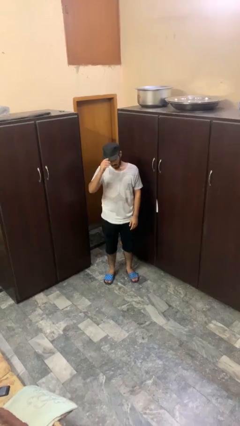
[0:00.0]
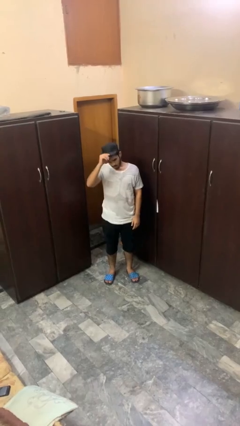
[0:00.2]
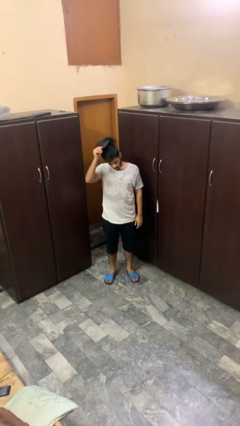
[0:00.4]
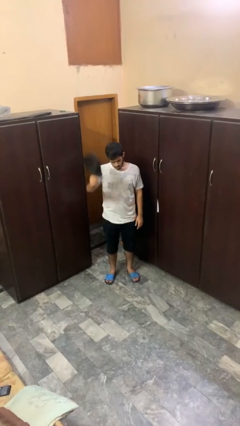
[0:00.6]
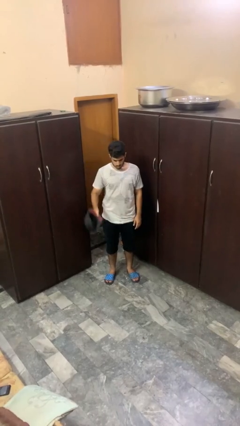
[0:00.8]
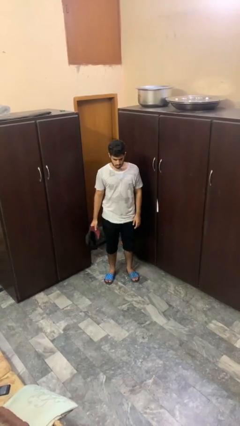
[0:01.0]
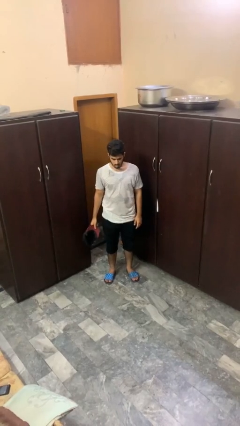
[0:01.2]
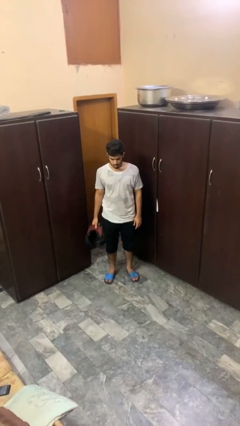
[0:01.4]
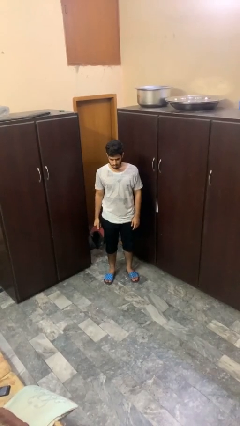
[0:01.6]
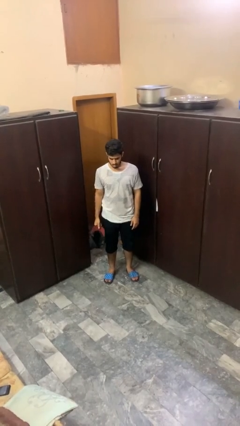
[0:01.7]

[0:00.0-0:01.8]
person takes off hat

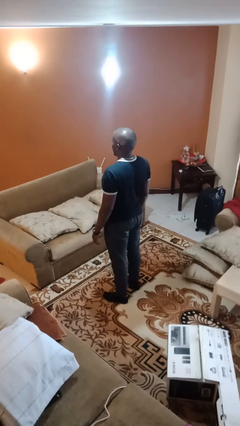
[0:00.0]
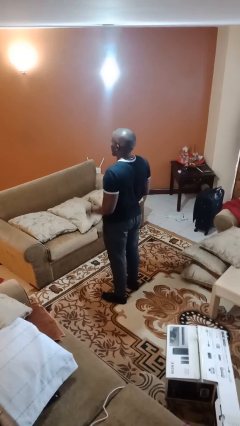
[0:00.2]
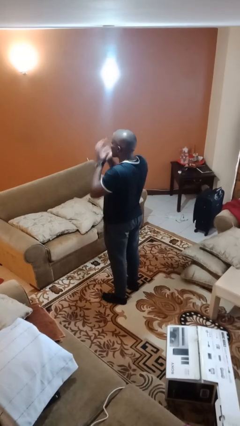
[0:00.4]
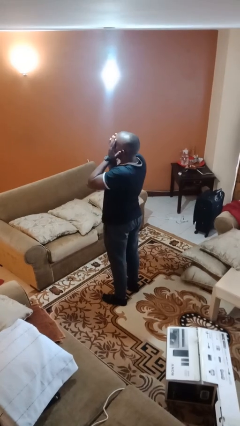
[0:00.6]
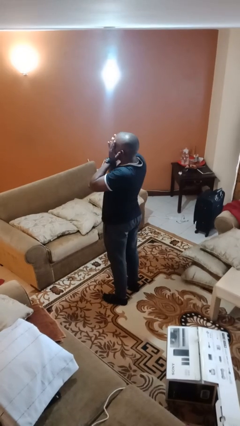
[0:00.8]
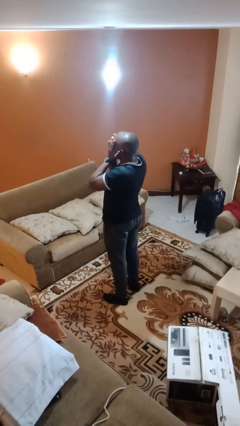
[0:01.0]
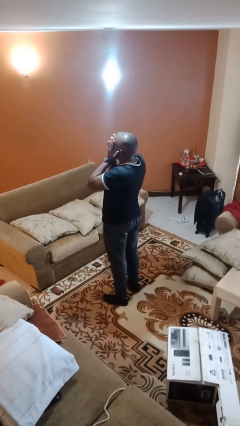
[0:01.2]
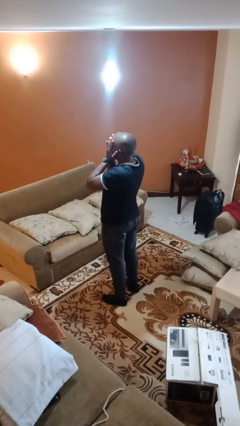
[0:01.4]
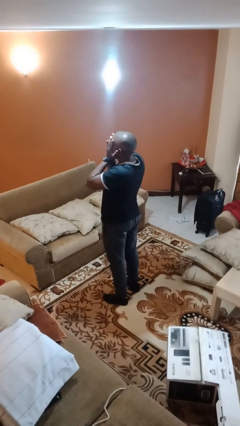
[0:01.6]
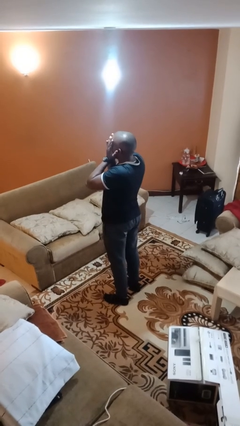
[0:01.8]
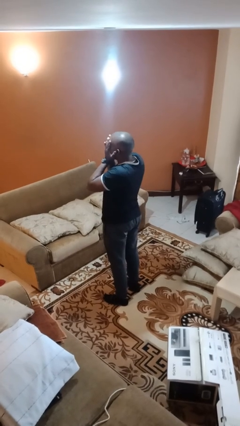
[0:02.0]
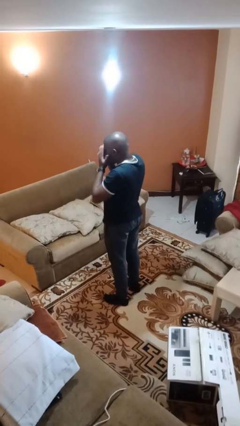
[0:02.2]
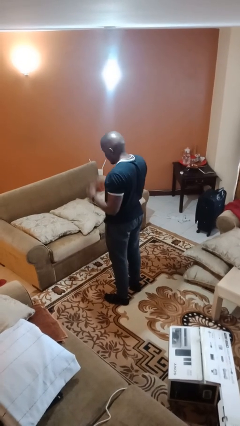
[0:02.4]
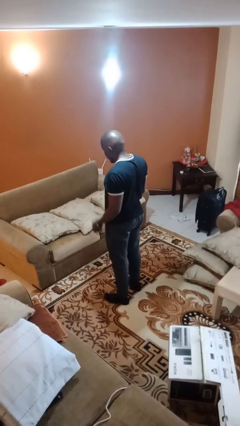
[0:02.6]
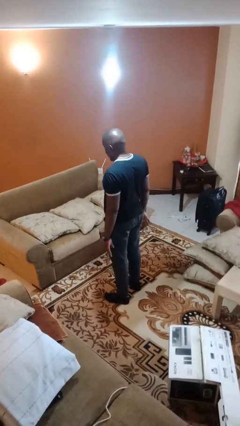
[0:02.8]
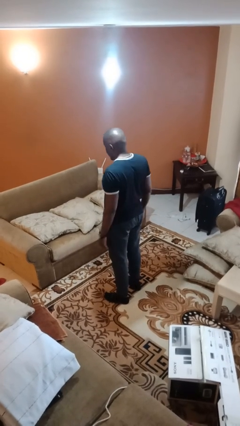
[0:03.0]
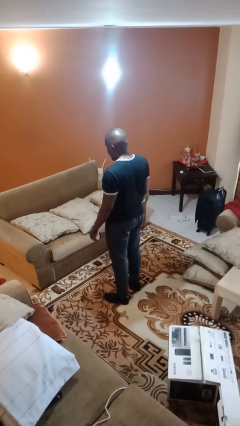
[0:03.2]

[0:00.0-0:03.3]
person covers face with hands

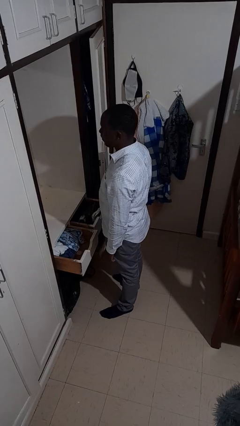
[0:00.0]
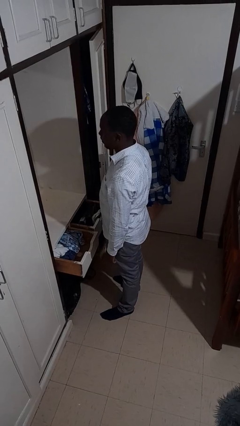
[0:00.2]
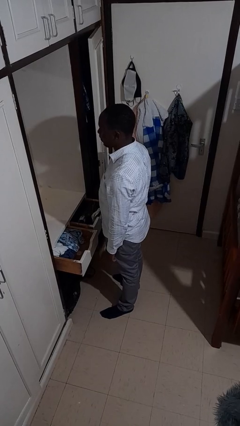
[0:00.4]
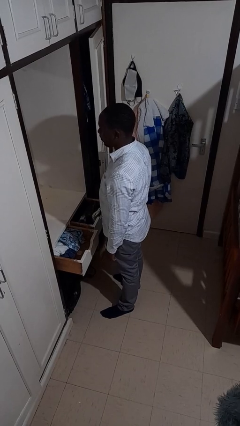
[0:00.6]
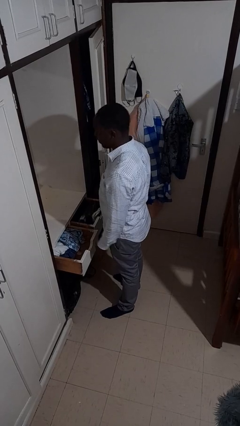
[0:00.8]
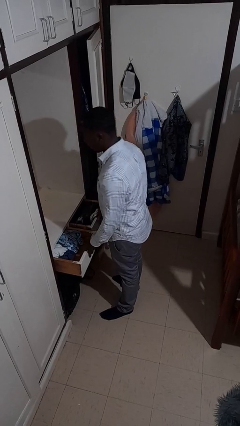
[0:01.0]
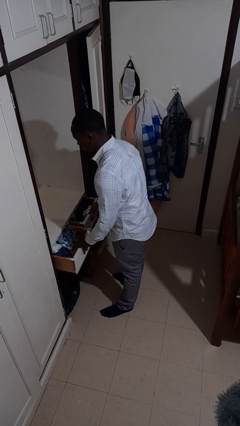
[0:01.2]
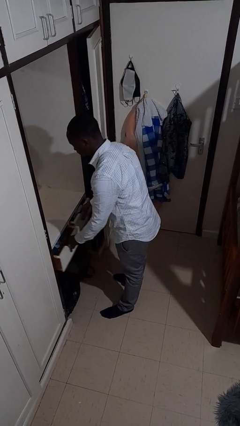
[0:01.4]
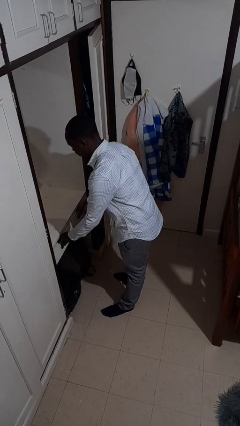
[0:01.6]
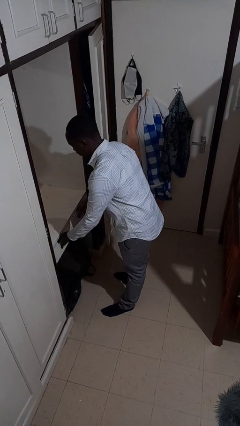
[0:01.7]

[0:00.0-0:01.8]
person closes dresser drawer

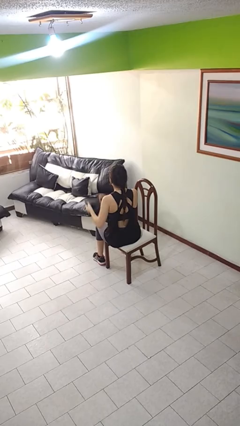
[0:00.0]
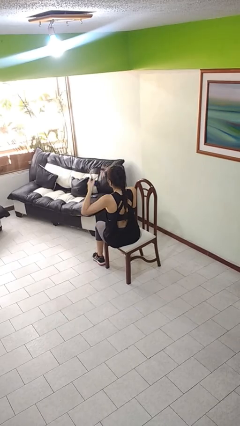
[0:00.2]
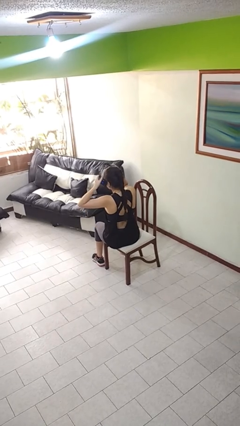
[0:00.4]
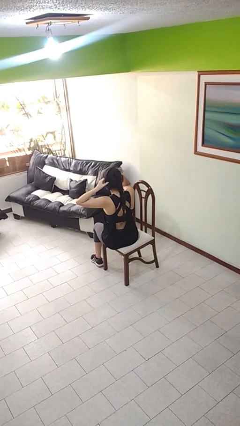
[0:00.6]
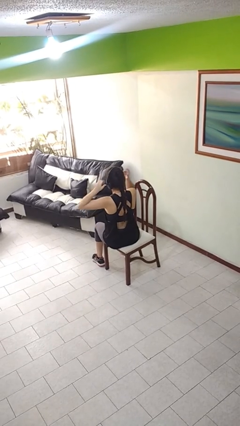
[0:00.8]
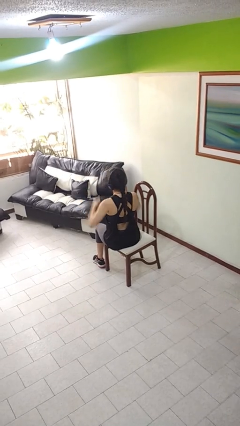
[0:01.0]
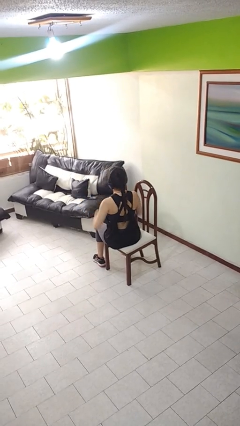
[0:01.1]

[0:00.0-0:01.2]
person puts on headphones

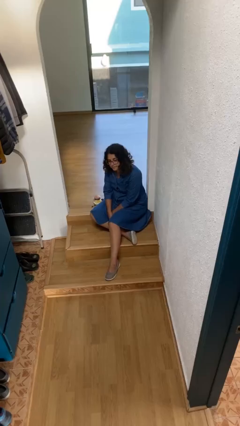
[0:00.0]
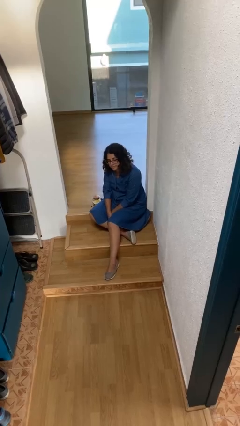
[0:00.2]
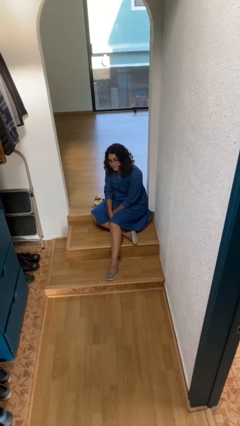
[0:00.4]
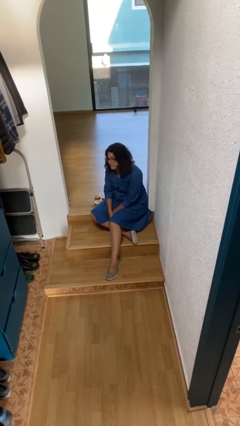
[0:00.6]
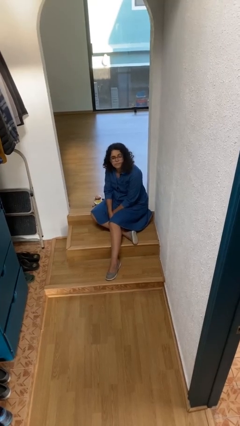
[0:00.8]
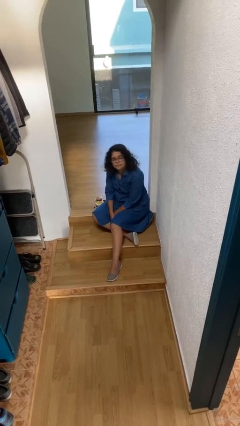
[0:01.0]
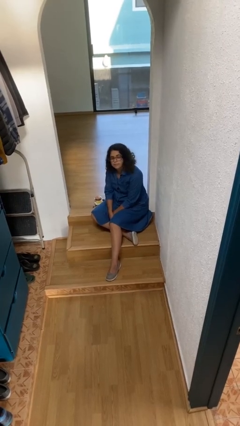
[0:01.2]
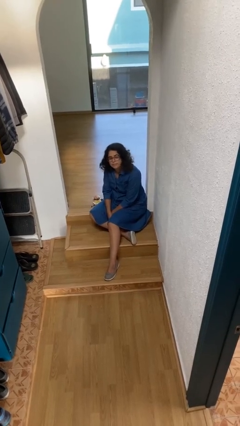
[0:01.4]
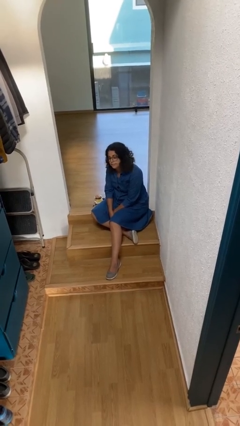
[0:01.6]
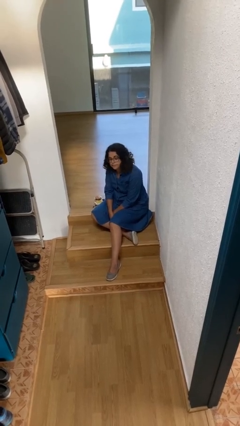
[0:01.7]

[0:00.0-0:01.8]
person shakes head

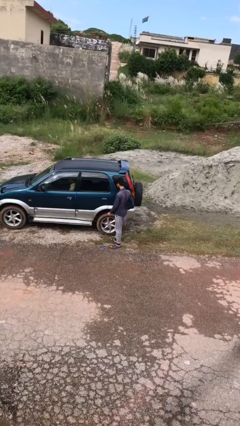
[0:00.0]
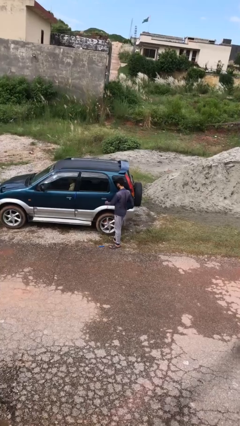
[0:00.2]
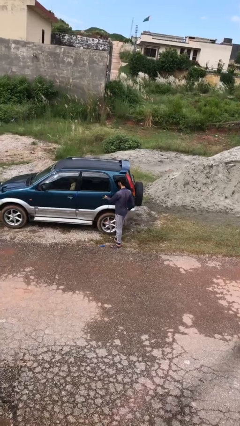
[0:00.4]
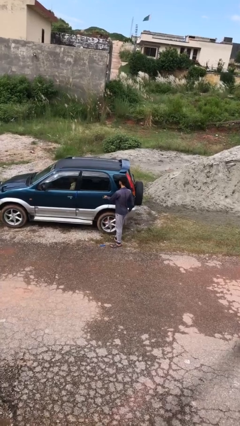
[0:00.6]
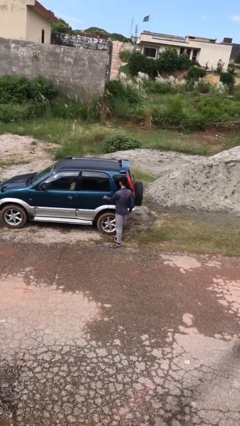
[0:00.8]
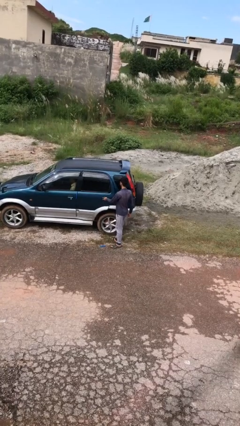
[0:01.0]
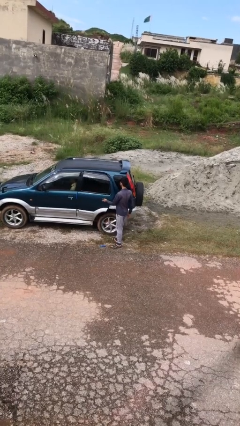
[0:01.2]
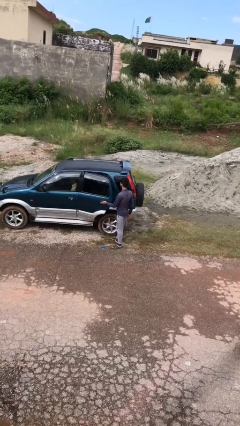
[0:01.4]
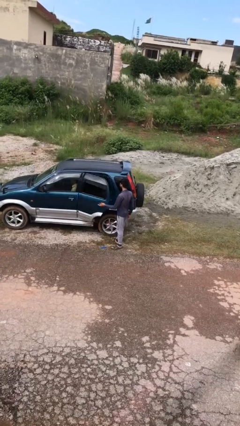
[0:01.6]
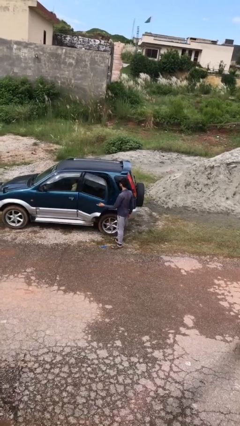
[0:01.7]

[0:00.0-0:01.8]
person opens car door

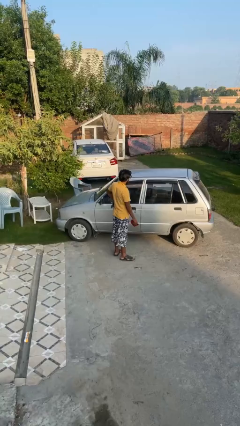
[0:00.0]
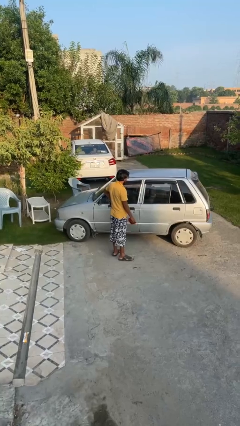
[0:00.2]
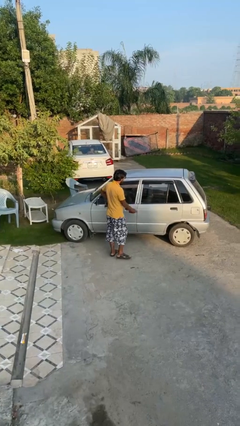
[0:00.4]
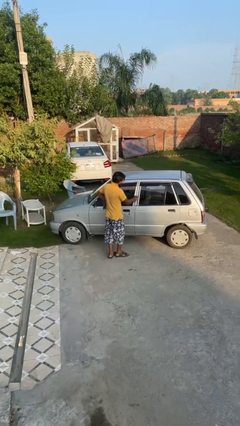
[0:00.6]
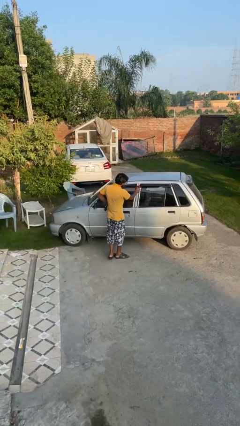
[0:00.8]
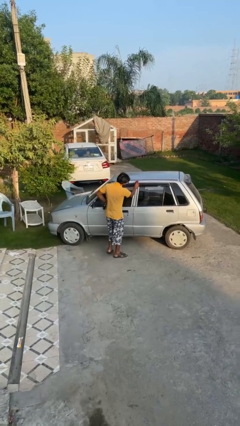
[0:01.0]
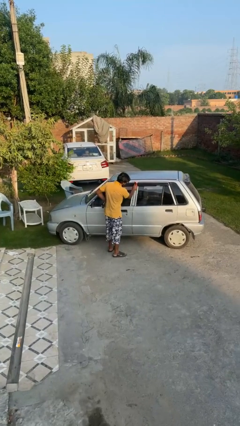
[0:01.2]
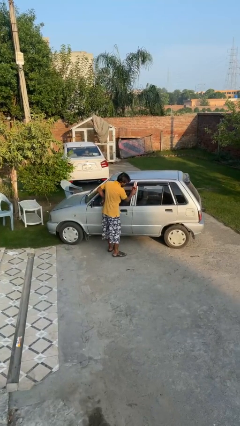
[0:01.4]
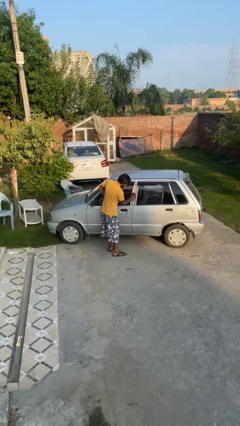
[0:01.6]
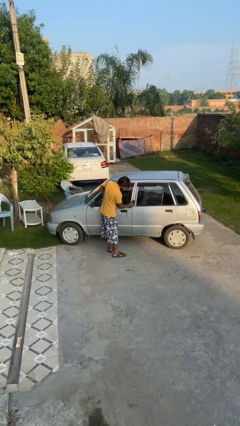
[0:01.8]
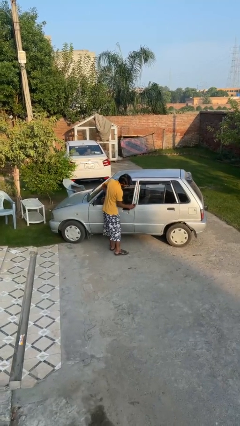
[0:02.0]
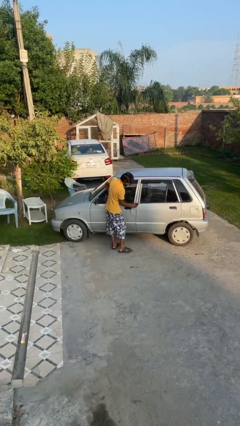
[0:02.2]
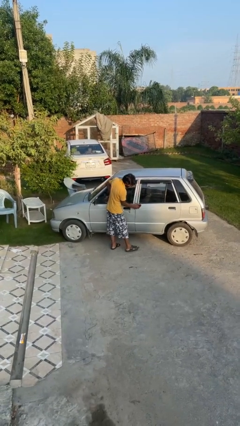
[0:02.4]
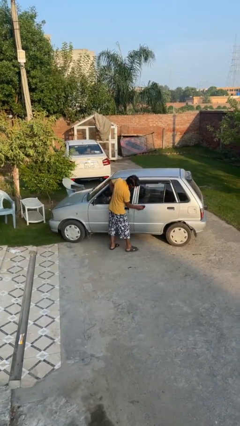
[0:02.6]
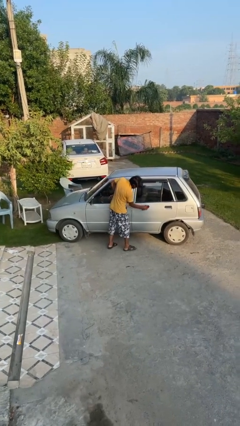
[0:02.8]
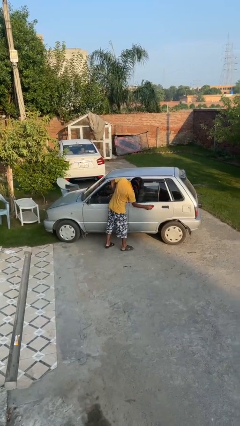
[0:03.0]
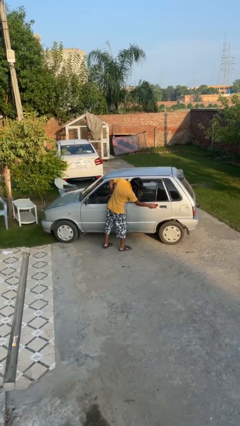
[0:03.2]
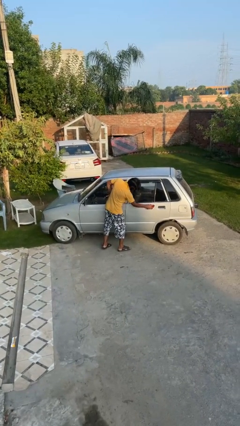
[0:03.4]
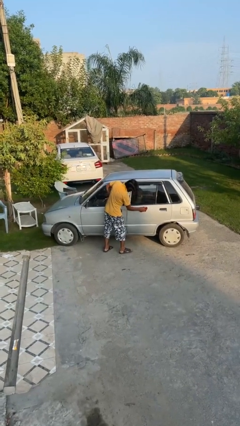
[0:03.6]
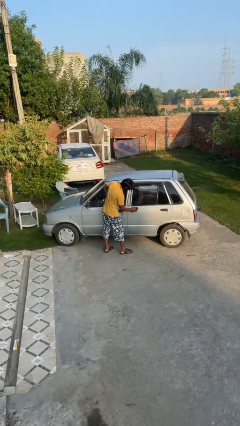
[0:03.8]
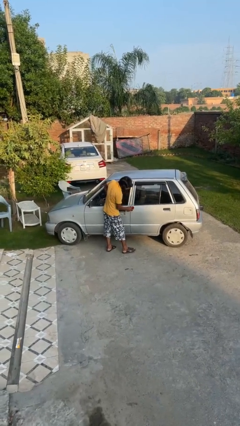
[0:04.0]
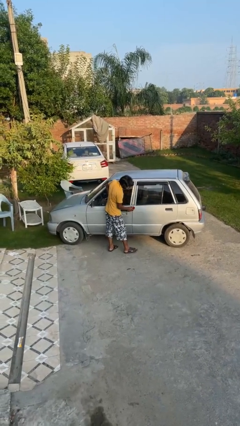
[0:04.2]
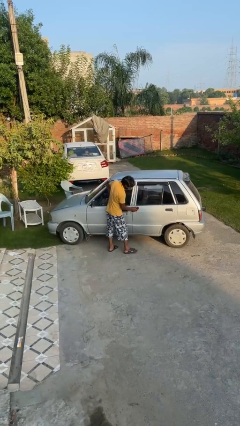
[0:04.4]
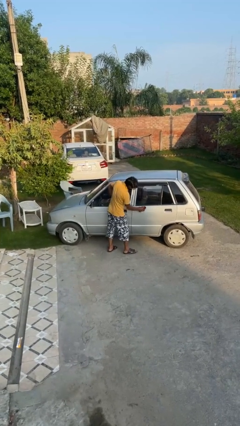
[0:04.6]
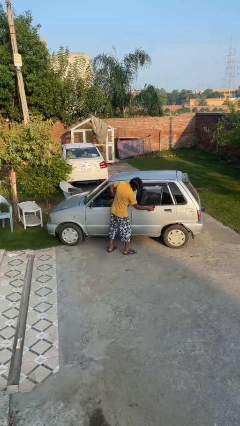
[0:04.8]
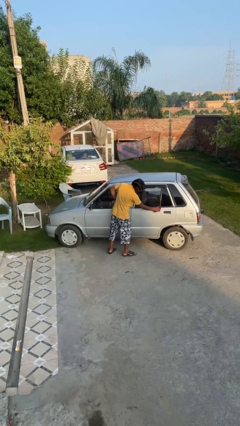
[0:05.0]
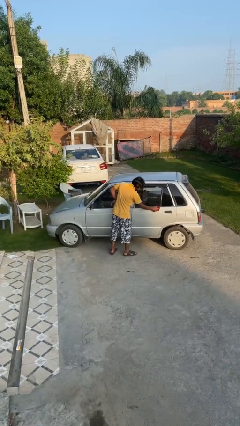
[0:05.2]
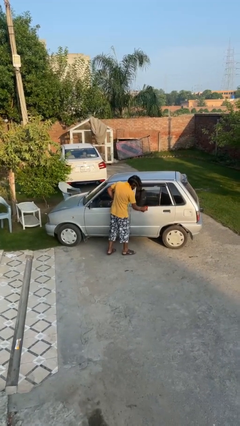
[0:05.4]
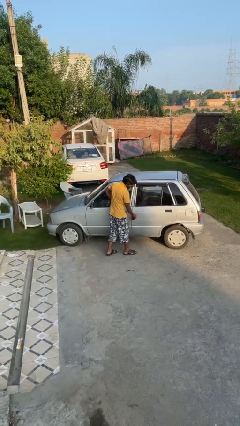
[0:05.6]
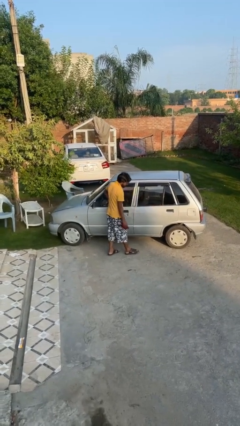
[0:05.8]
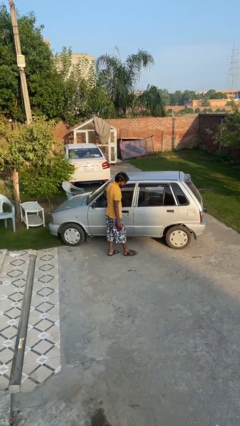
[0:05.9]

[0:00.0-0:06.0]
person polishes car with rag
